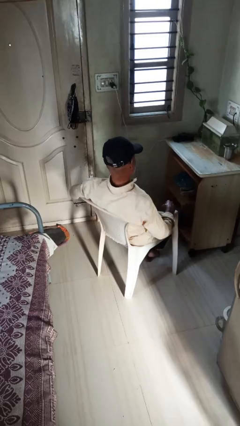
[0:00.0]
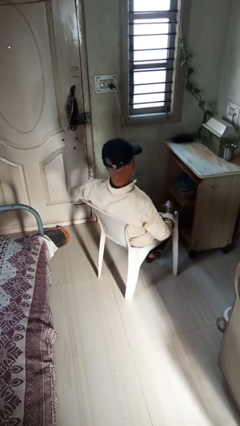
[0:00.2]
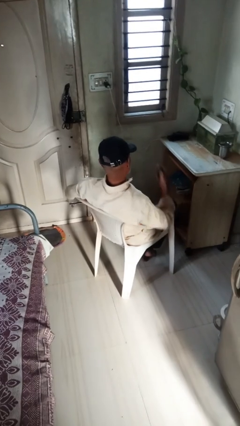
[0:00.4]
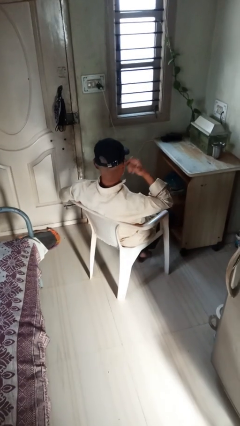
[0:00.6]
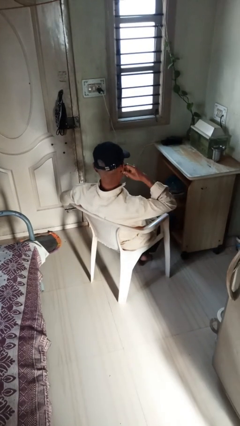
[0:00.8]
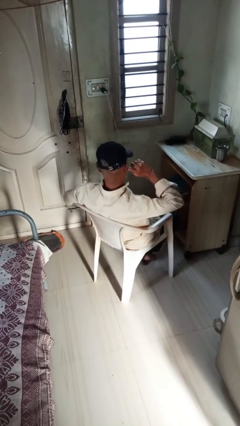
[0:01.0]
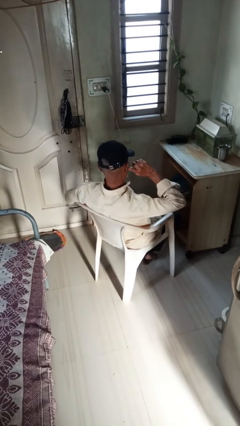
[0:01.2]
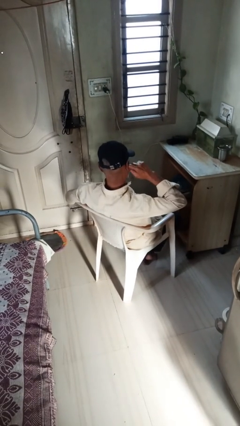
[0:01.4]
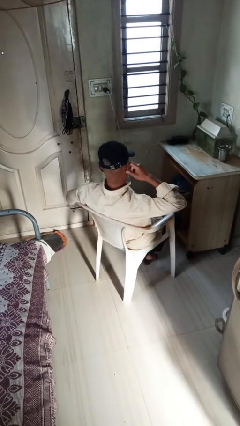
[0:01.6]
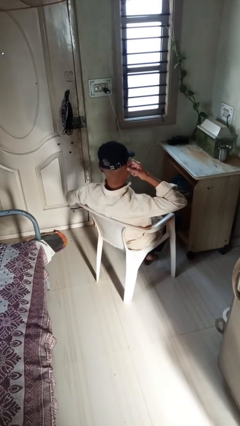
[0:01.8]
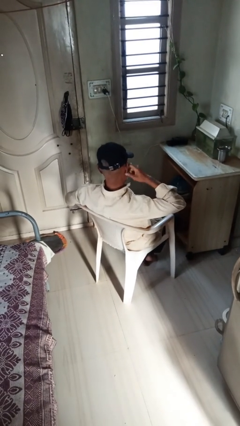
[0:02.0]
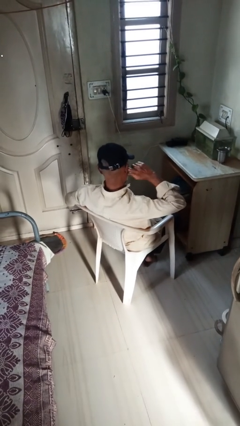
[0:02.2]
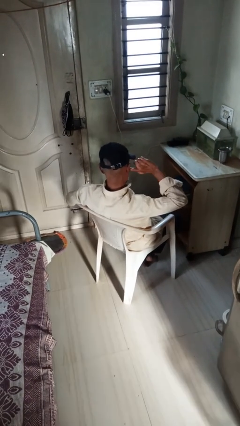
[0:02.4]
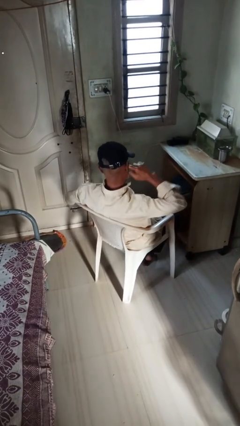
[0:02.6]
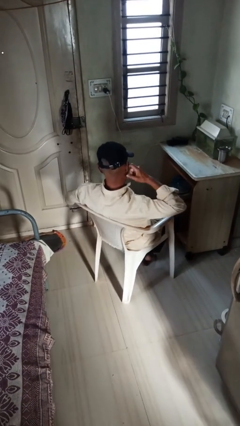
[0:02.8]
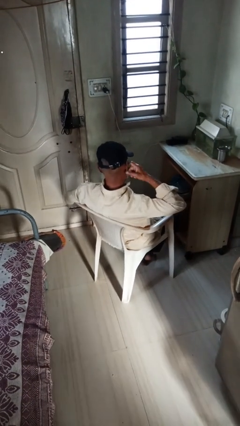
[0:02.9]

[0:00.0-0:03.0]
person puts fingers in ear

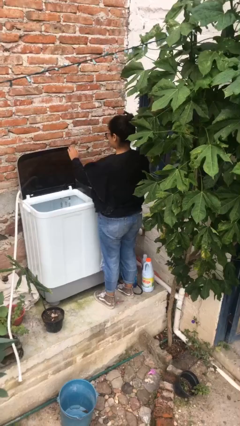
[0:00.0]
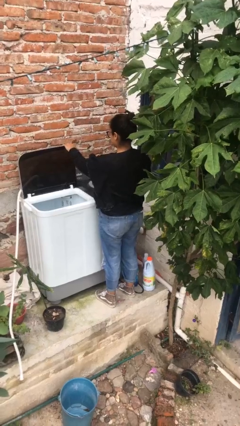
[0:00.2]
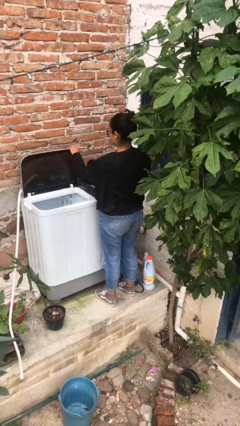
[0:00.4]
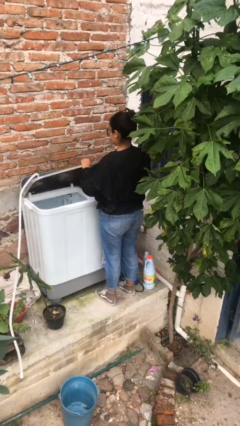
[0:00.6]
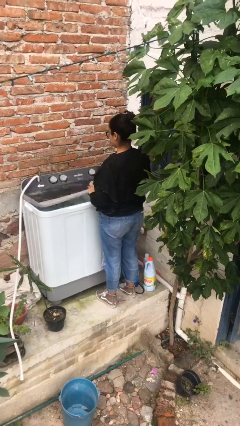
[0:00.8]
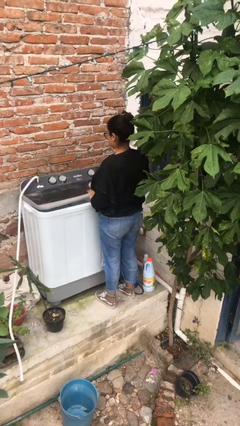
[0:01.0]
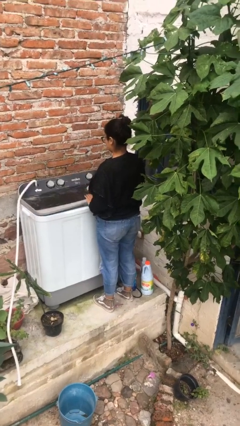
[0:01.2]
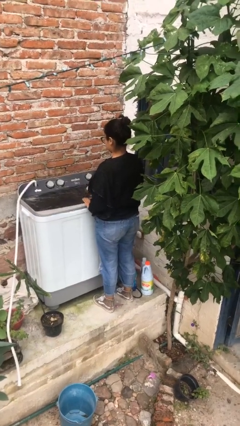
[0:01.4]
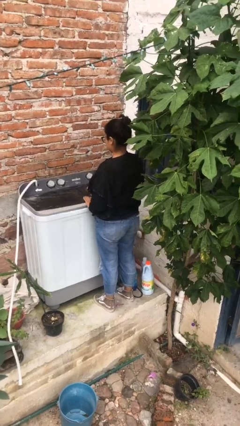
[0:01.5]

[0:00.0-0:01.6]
person closes clothes washer

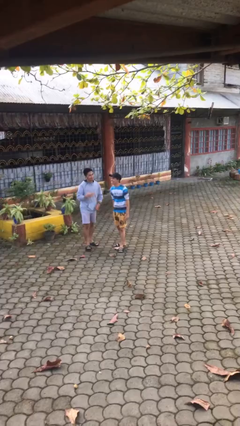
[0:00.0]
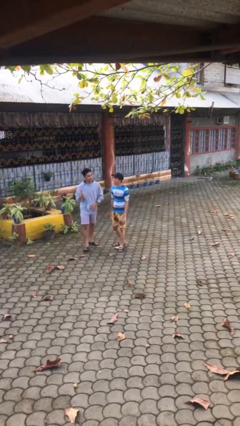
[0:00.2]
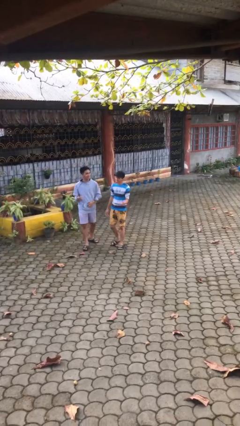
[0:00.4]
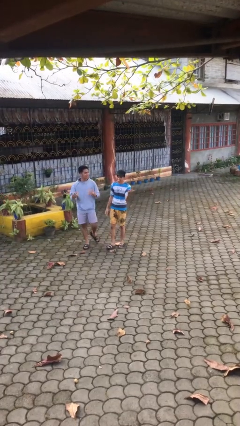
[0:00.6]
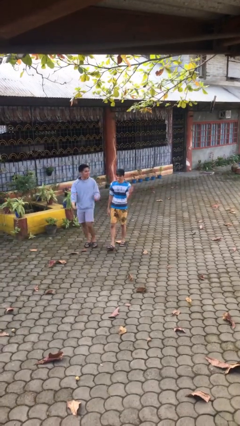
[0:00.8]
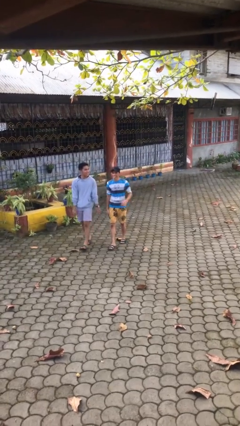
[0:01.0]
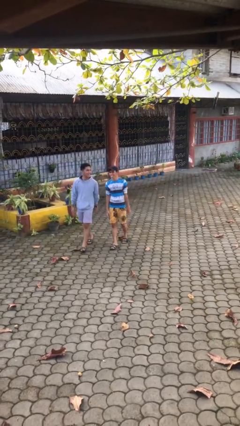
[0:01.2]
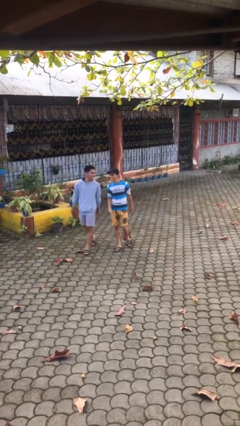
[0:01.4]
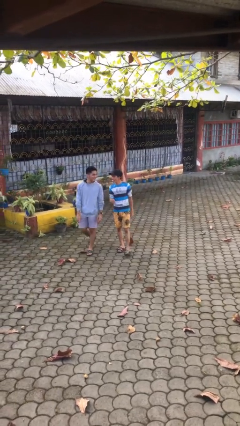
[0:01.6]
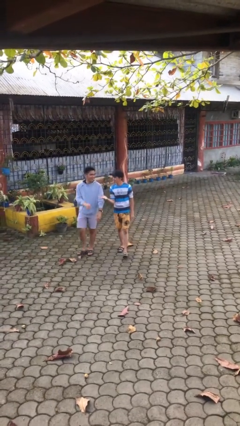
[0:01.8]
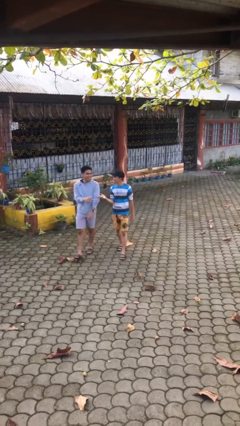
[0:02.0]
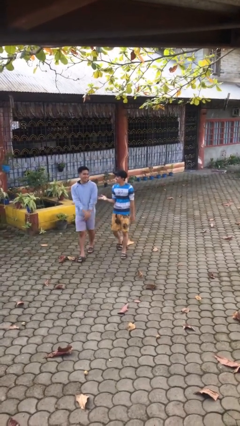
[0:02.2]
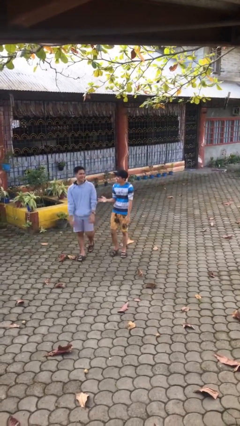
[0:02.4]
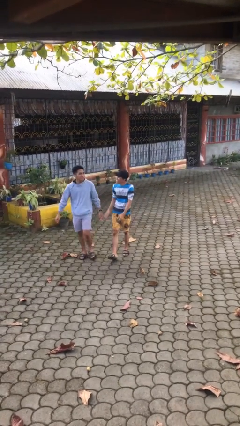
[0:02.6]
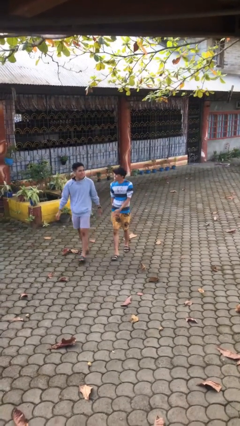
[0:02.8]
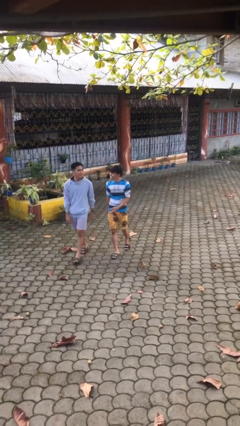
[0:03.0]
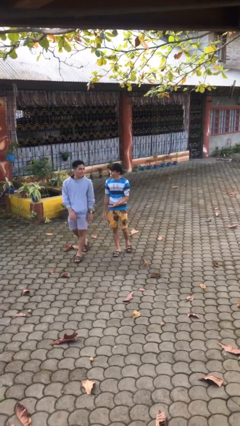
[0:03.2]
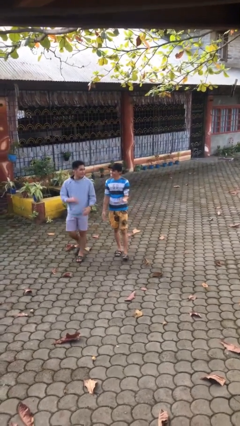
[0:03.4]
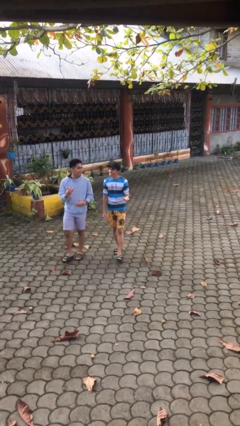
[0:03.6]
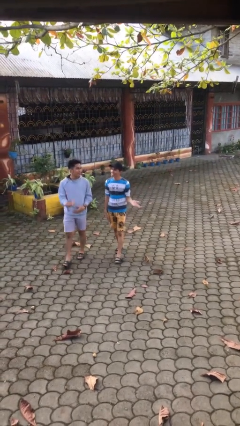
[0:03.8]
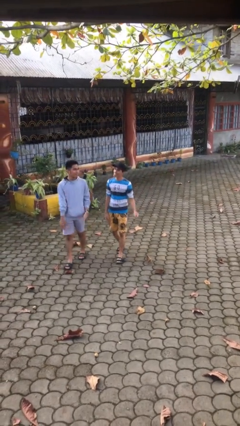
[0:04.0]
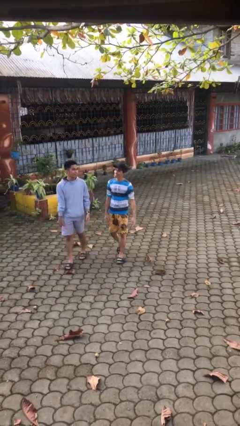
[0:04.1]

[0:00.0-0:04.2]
person talks to person

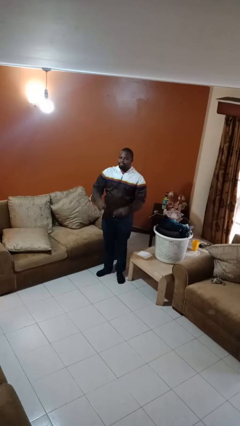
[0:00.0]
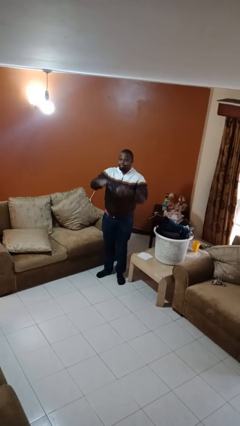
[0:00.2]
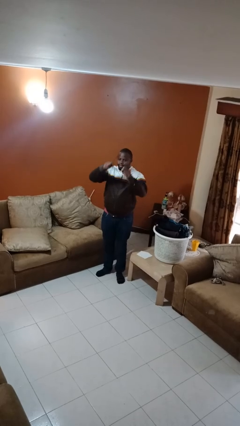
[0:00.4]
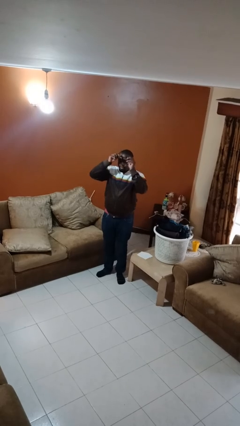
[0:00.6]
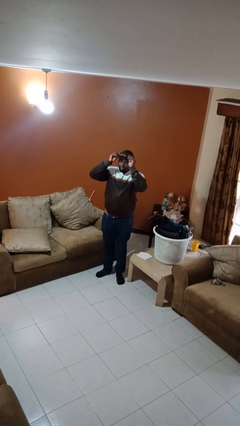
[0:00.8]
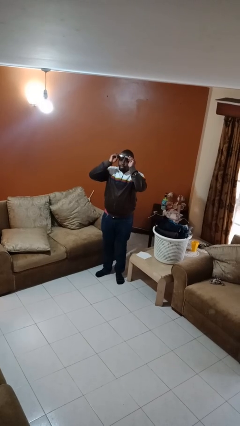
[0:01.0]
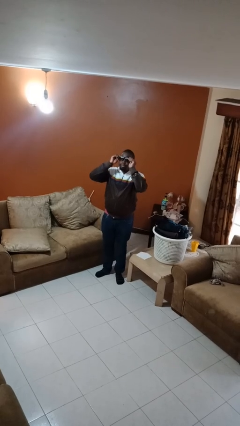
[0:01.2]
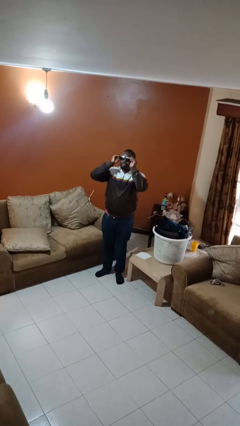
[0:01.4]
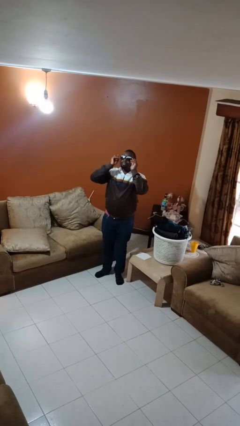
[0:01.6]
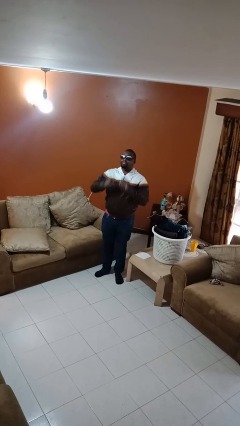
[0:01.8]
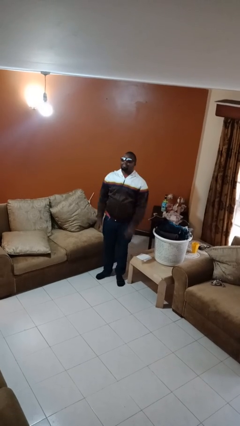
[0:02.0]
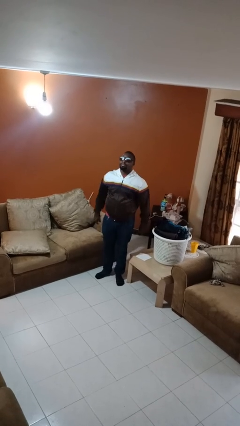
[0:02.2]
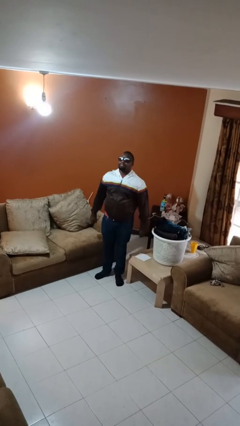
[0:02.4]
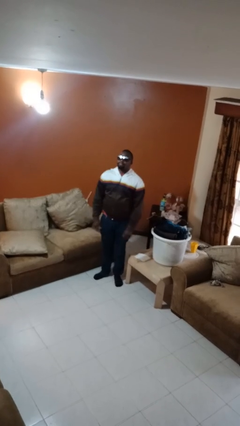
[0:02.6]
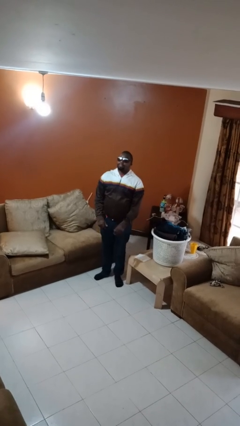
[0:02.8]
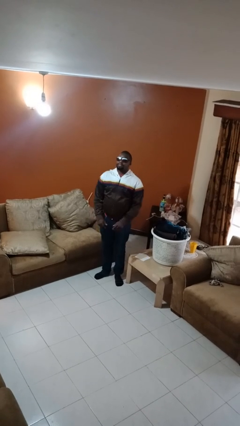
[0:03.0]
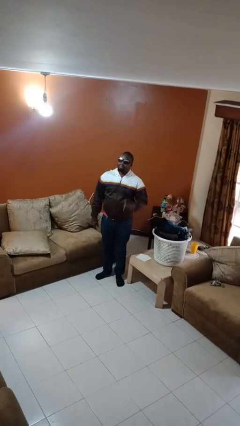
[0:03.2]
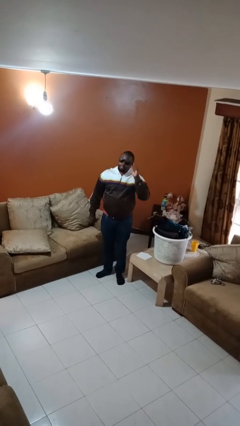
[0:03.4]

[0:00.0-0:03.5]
person puts on sunglasses

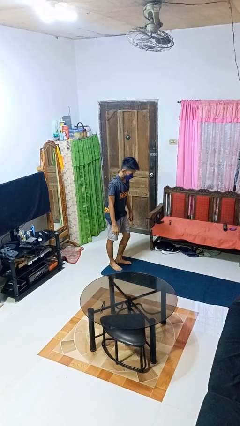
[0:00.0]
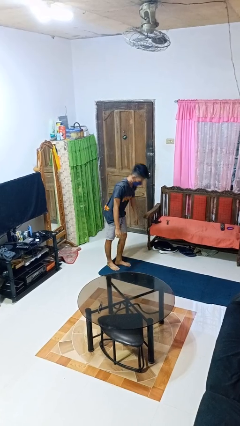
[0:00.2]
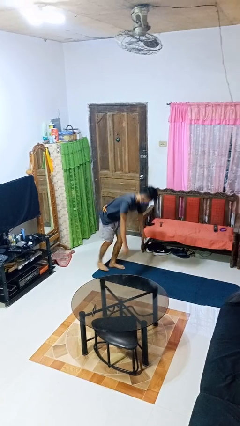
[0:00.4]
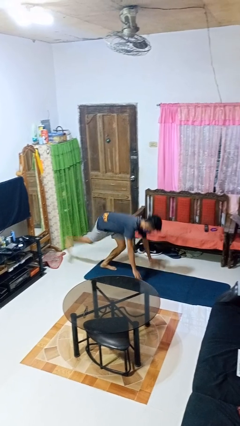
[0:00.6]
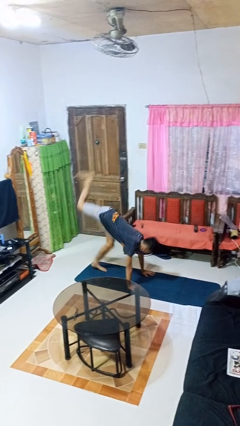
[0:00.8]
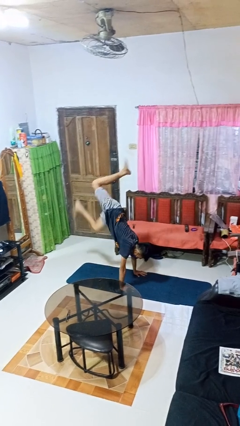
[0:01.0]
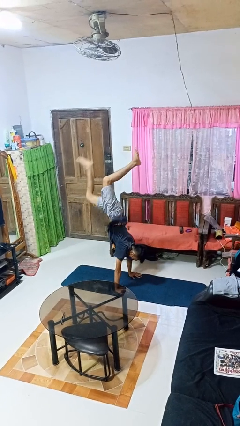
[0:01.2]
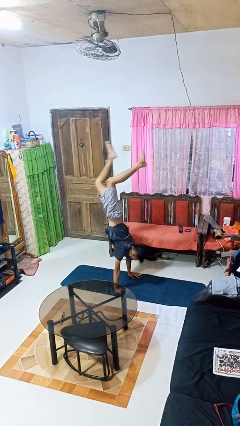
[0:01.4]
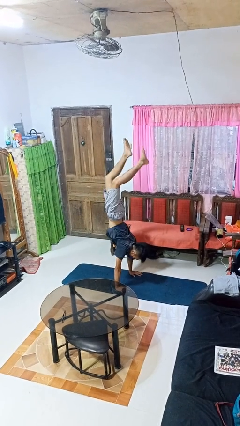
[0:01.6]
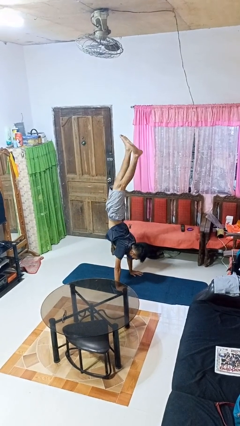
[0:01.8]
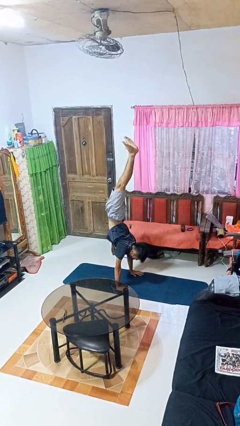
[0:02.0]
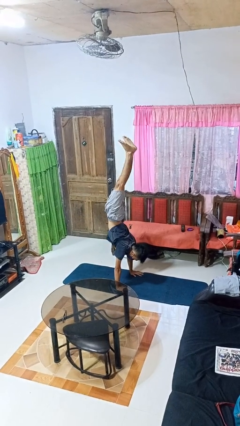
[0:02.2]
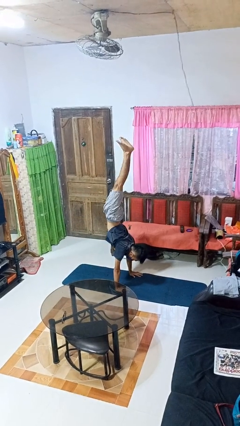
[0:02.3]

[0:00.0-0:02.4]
person handstand

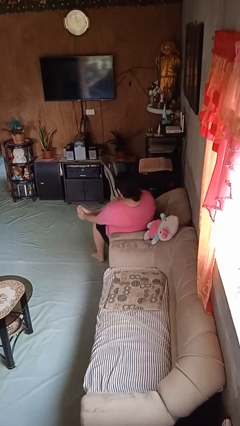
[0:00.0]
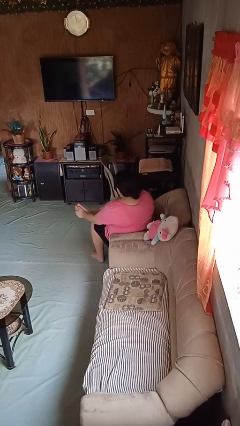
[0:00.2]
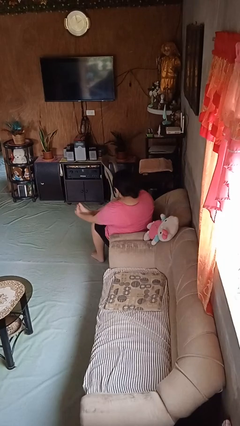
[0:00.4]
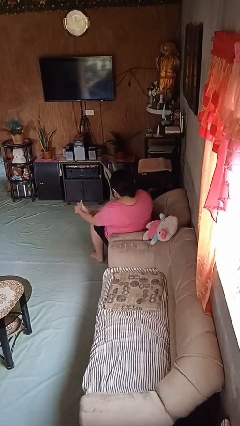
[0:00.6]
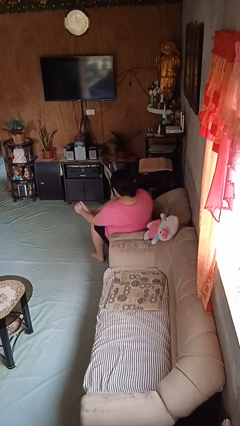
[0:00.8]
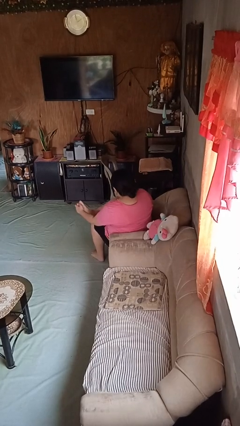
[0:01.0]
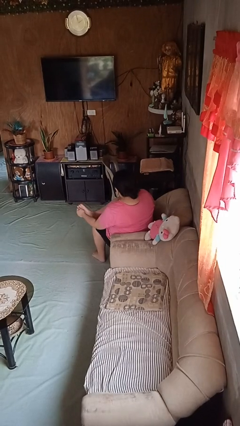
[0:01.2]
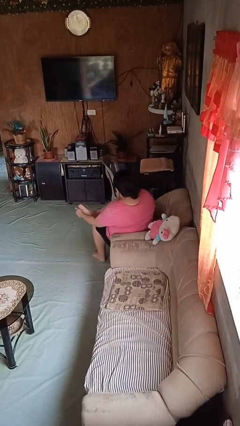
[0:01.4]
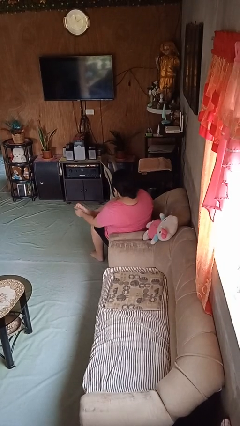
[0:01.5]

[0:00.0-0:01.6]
person rubs foot

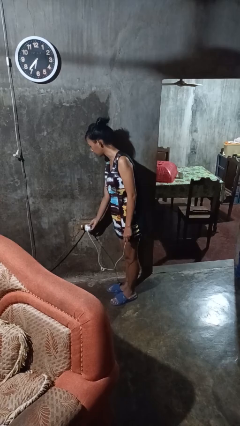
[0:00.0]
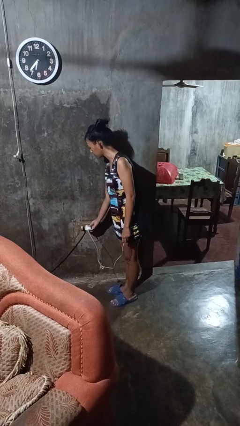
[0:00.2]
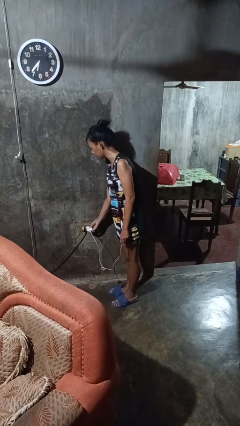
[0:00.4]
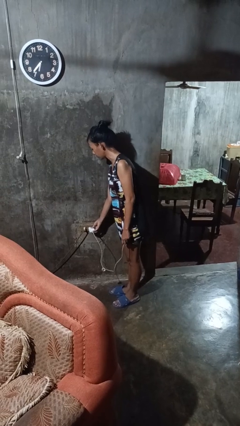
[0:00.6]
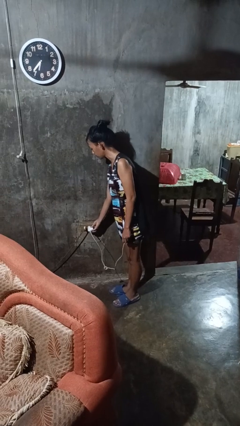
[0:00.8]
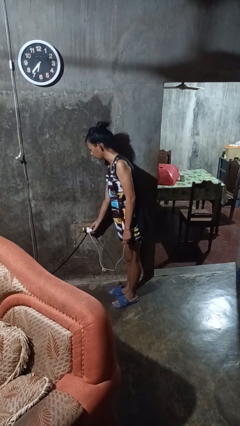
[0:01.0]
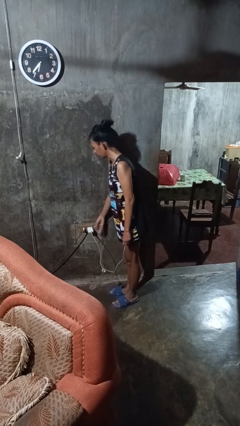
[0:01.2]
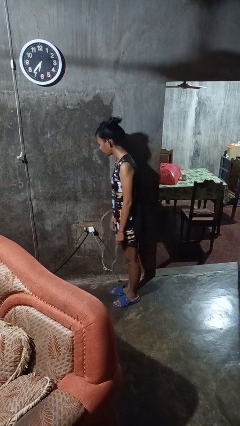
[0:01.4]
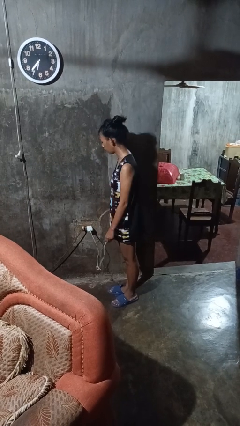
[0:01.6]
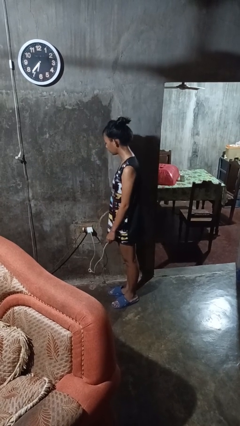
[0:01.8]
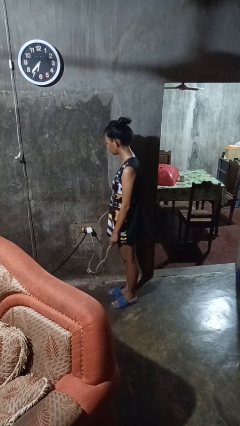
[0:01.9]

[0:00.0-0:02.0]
person plugs into electrical socket
